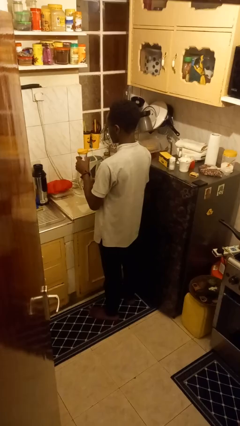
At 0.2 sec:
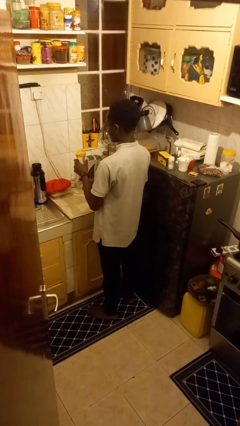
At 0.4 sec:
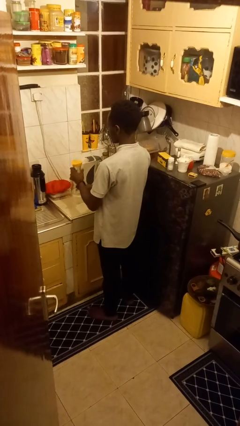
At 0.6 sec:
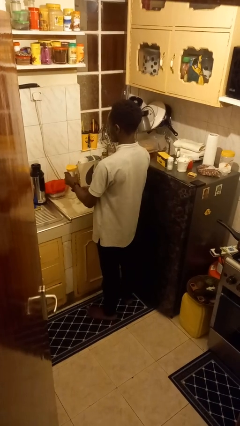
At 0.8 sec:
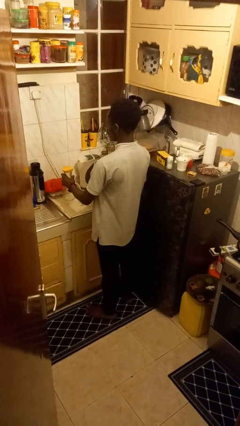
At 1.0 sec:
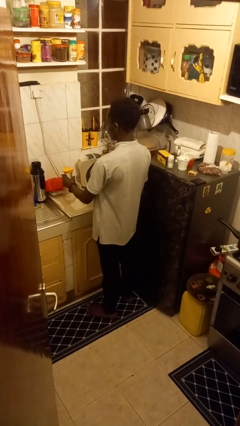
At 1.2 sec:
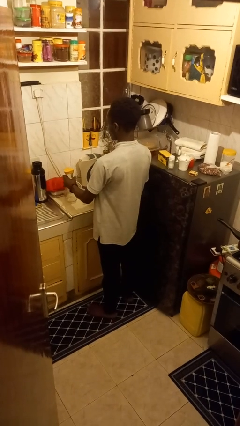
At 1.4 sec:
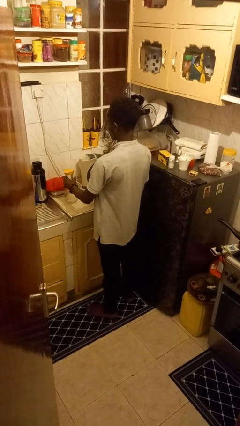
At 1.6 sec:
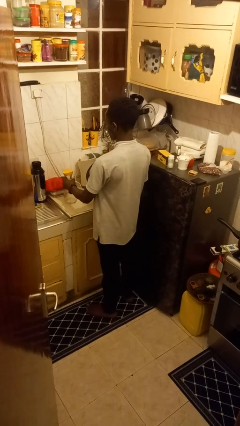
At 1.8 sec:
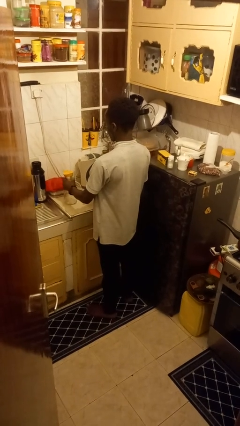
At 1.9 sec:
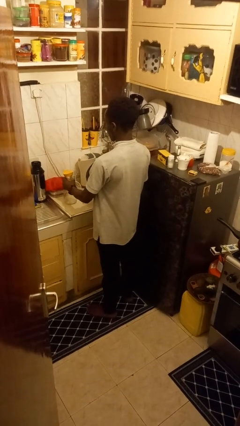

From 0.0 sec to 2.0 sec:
person puts down object on countertop

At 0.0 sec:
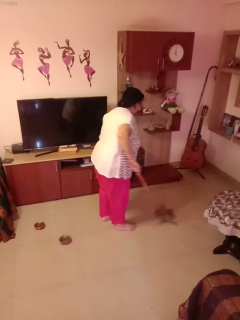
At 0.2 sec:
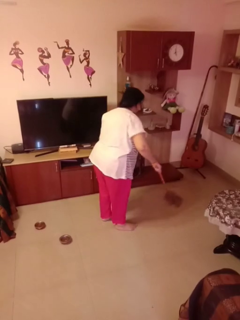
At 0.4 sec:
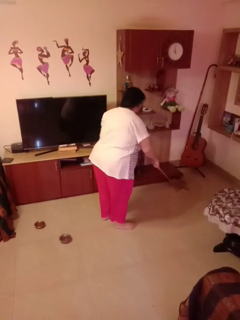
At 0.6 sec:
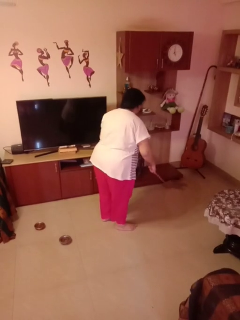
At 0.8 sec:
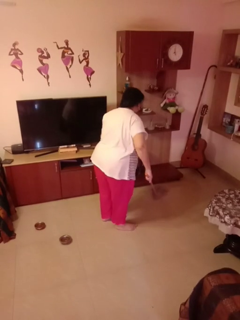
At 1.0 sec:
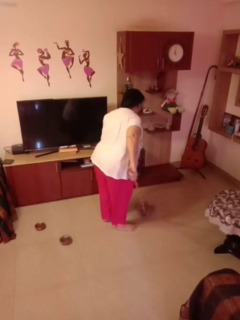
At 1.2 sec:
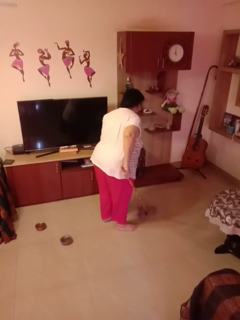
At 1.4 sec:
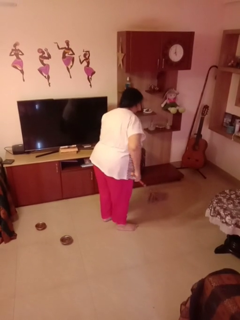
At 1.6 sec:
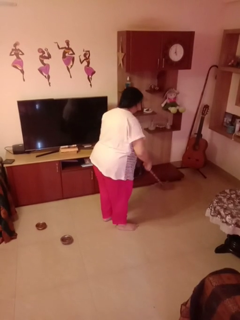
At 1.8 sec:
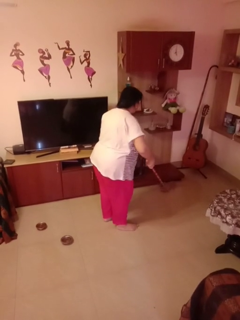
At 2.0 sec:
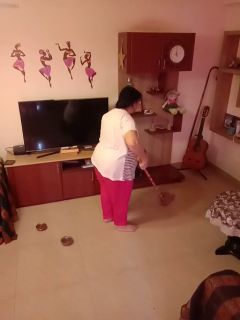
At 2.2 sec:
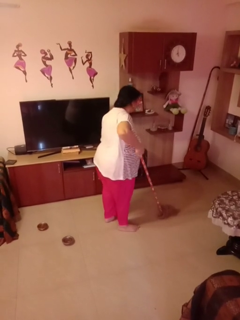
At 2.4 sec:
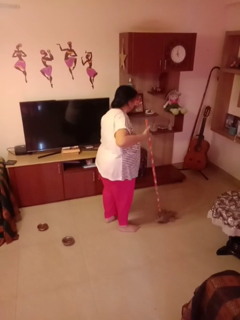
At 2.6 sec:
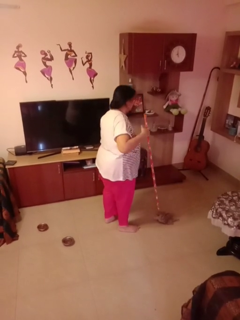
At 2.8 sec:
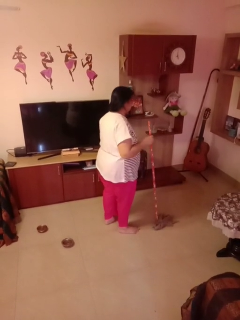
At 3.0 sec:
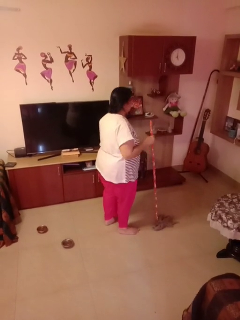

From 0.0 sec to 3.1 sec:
person mops

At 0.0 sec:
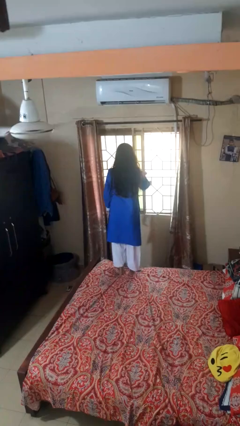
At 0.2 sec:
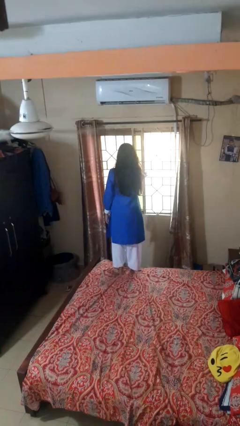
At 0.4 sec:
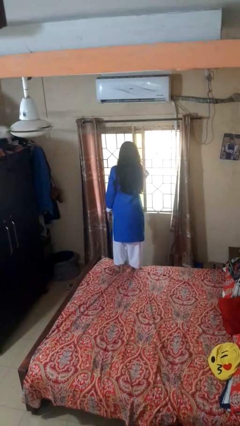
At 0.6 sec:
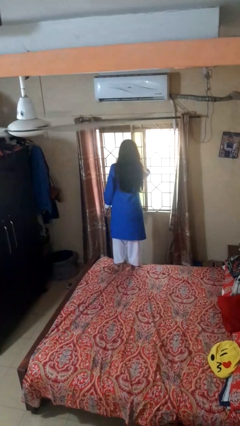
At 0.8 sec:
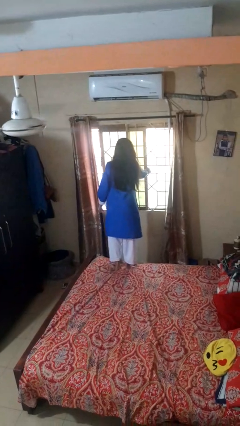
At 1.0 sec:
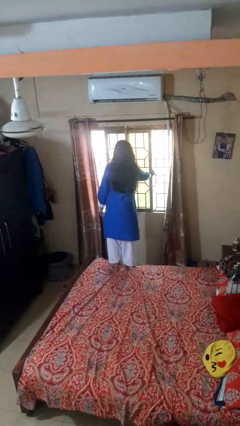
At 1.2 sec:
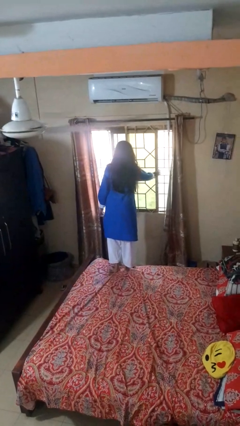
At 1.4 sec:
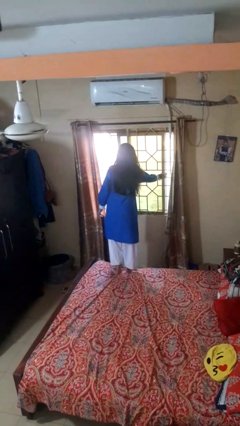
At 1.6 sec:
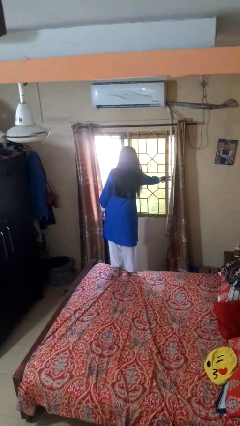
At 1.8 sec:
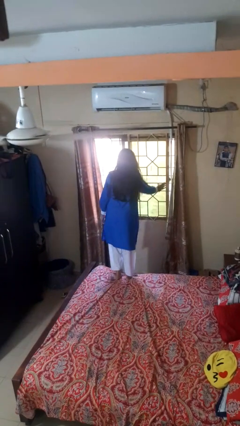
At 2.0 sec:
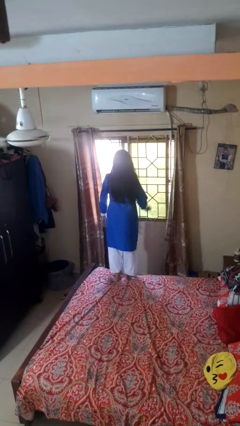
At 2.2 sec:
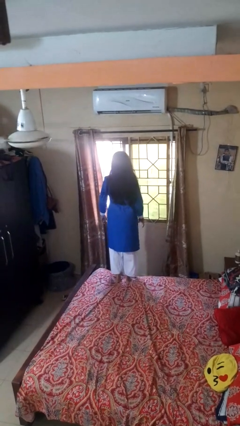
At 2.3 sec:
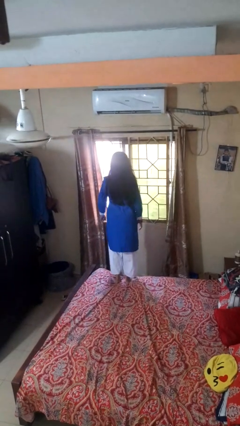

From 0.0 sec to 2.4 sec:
person opens home window

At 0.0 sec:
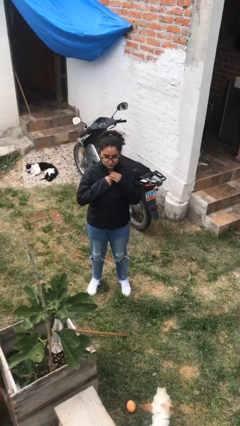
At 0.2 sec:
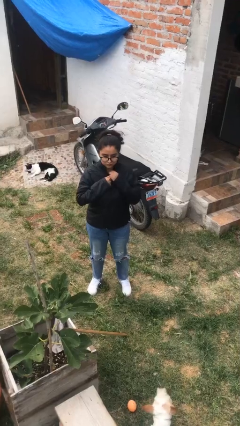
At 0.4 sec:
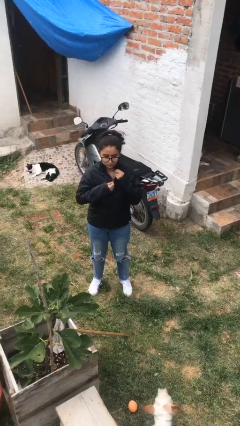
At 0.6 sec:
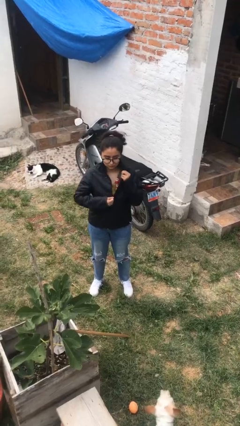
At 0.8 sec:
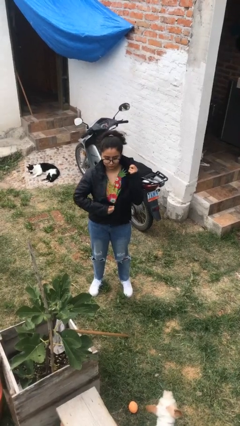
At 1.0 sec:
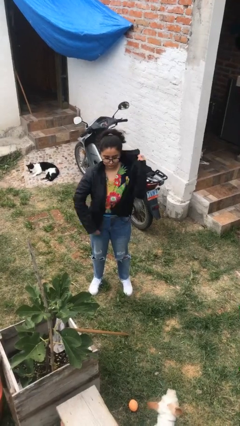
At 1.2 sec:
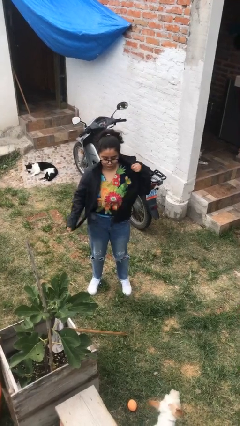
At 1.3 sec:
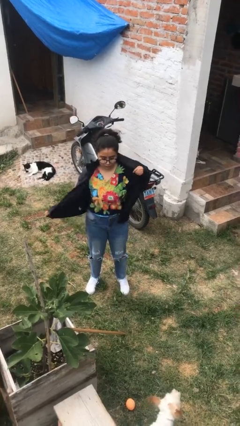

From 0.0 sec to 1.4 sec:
person unzips jacket

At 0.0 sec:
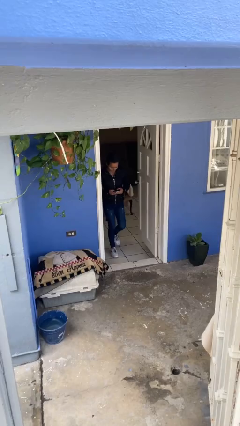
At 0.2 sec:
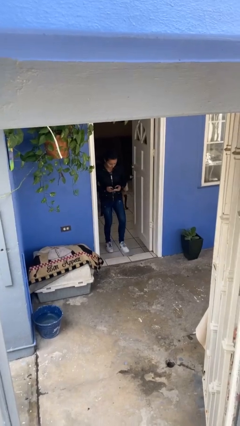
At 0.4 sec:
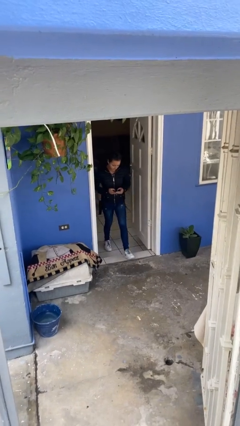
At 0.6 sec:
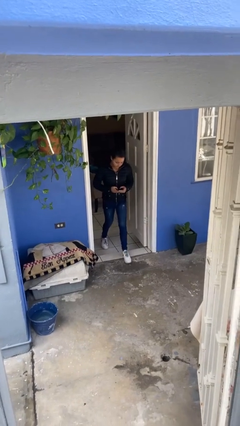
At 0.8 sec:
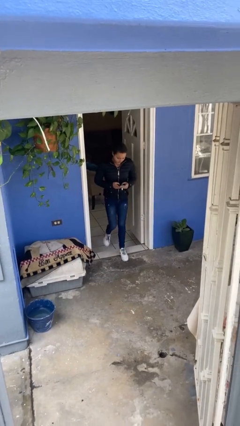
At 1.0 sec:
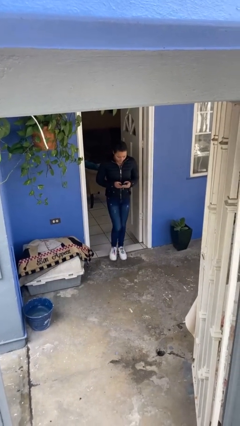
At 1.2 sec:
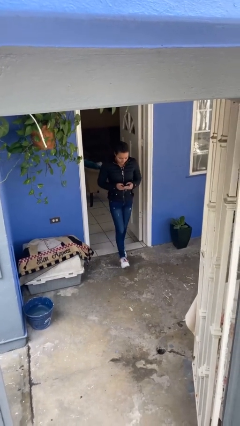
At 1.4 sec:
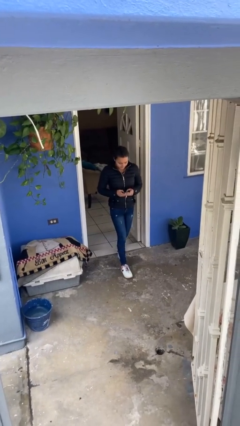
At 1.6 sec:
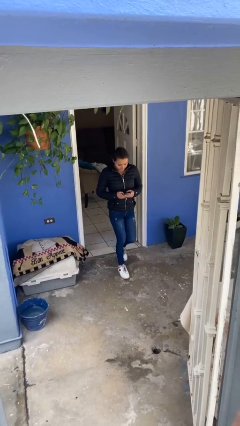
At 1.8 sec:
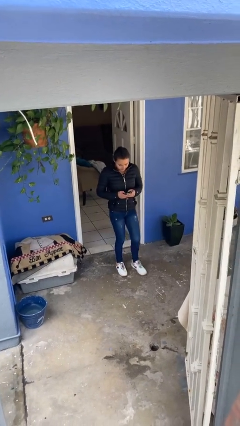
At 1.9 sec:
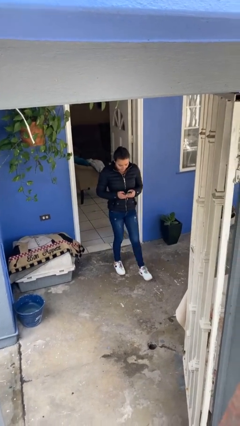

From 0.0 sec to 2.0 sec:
person enters scene through structure

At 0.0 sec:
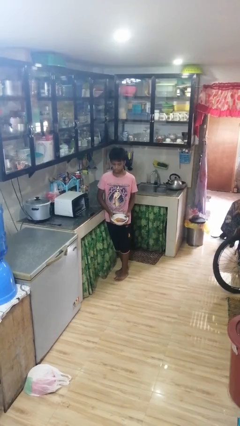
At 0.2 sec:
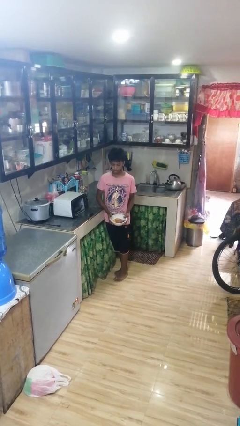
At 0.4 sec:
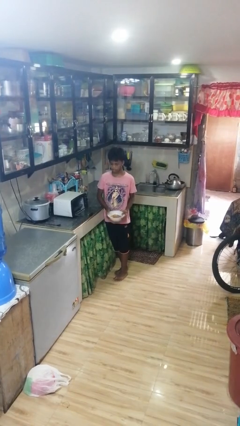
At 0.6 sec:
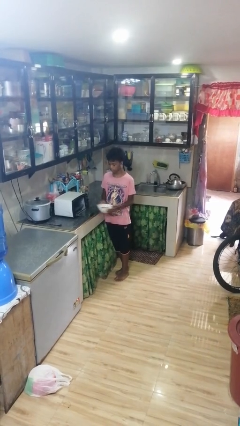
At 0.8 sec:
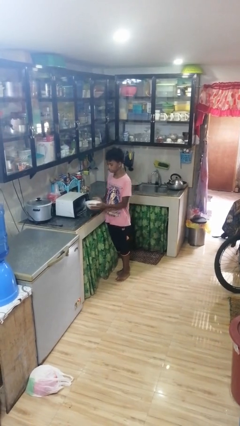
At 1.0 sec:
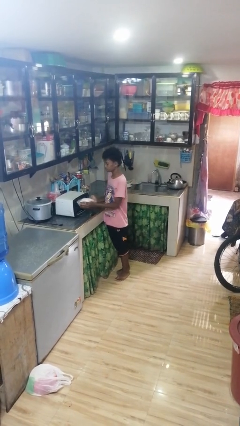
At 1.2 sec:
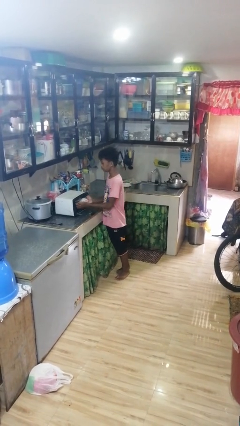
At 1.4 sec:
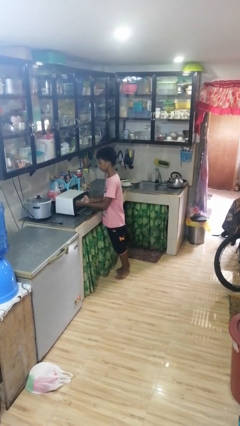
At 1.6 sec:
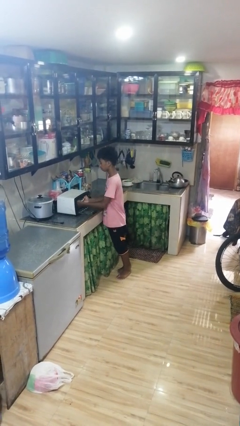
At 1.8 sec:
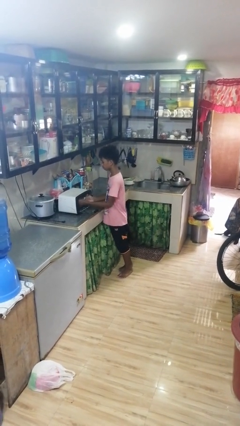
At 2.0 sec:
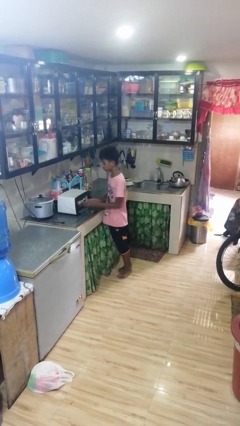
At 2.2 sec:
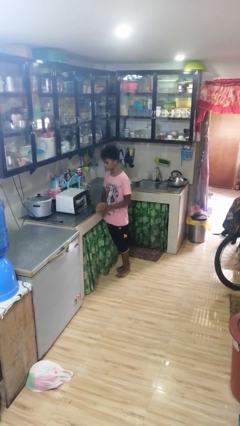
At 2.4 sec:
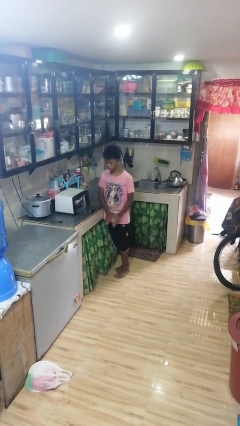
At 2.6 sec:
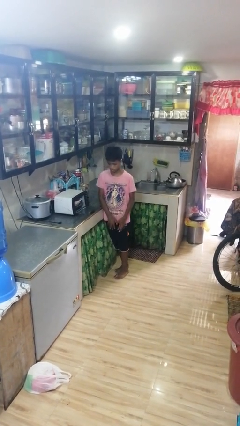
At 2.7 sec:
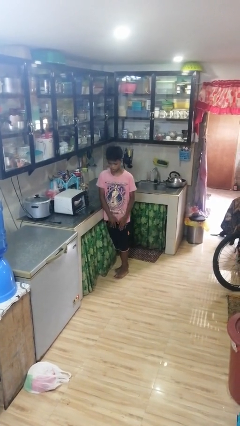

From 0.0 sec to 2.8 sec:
person puts object into microwave

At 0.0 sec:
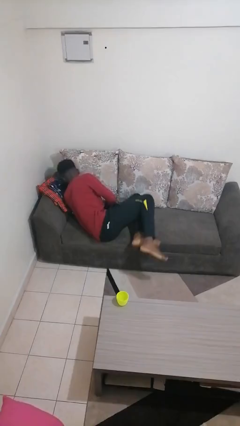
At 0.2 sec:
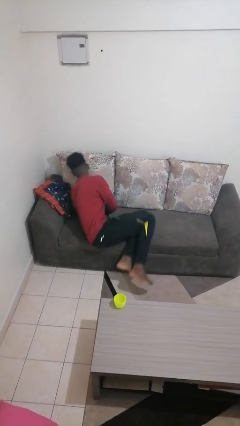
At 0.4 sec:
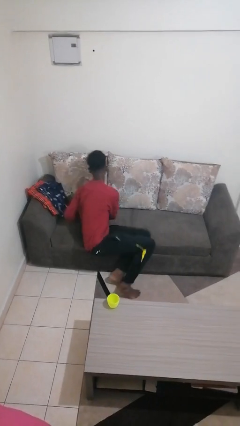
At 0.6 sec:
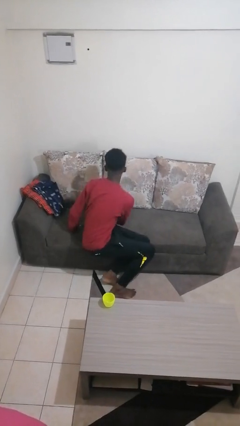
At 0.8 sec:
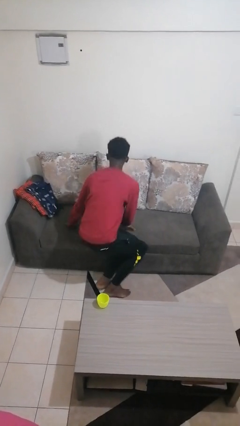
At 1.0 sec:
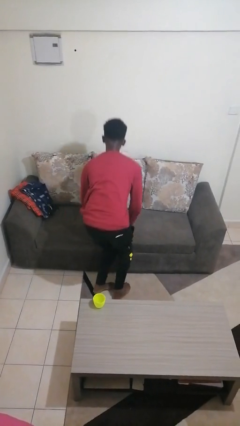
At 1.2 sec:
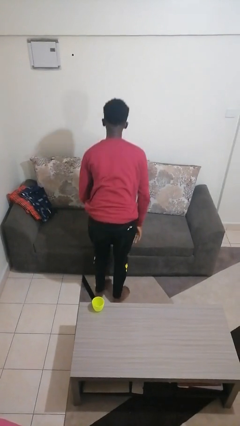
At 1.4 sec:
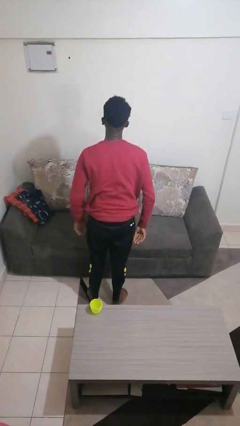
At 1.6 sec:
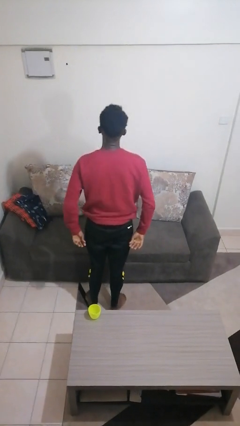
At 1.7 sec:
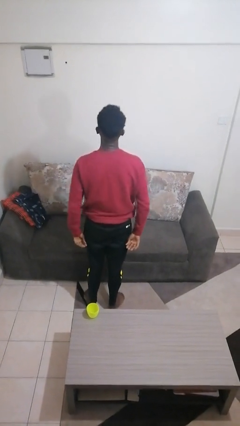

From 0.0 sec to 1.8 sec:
person stands up

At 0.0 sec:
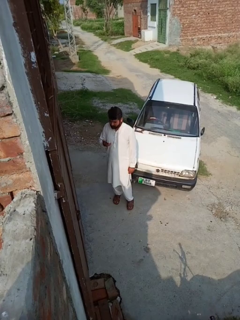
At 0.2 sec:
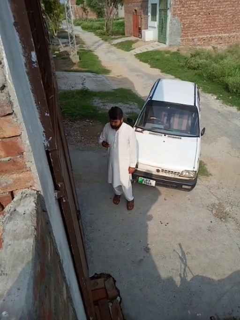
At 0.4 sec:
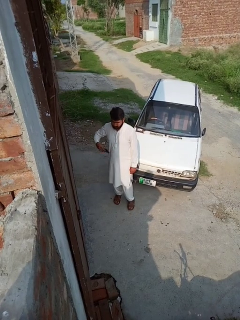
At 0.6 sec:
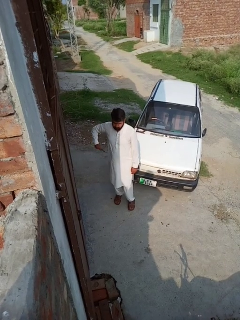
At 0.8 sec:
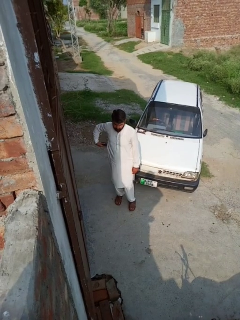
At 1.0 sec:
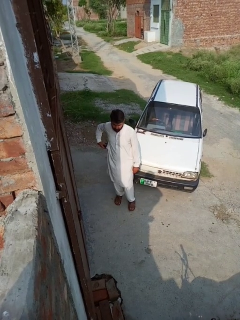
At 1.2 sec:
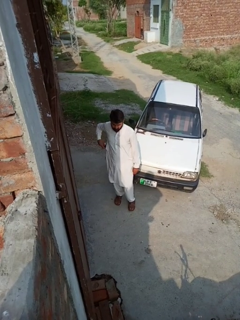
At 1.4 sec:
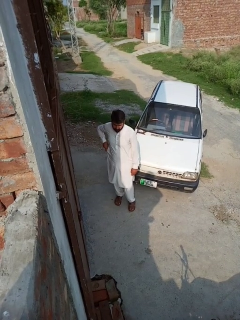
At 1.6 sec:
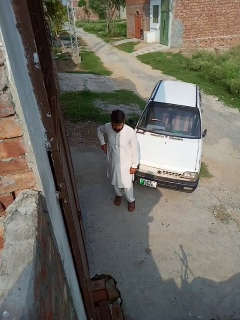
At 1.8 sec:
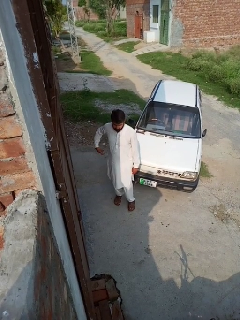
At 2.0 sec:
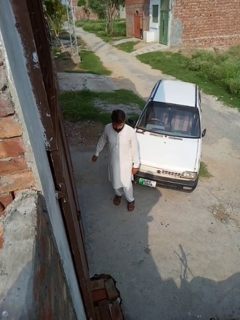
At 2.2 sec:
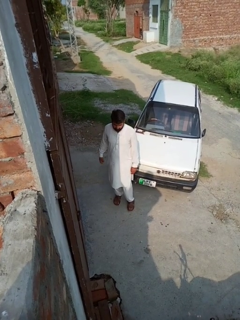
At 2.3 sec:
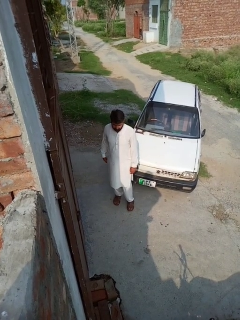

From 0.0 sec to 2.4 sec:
person puts phone into pocket
